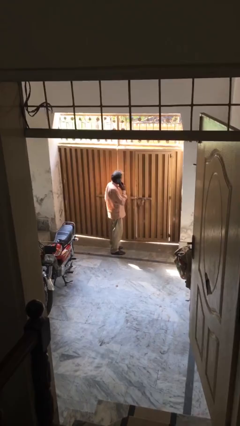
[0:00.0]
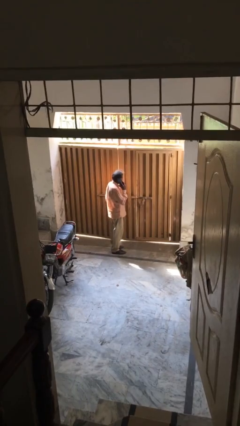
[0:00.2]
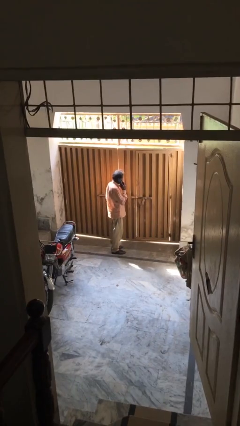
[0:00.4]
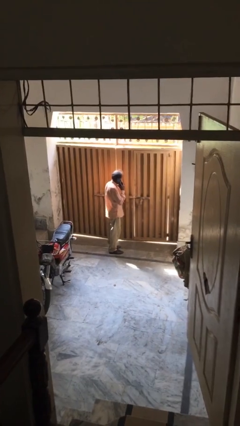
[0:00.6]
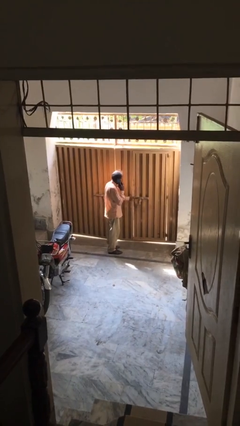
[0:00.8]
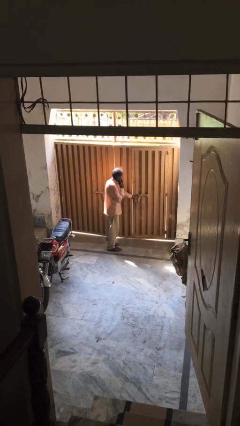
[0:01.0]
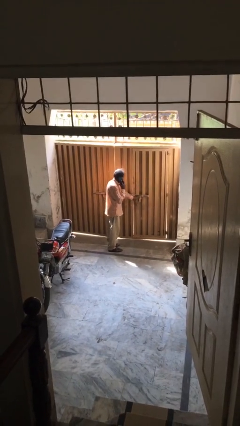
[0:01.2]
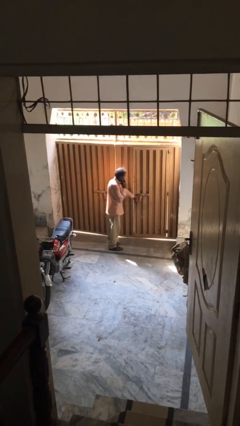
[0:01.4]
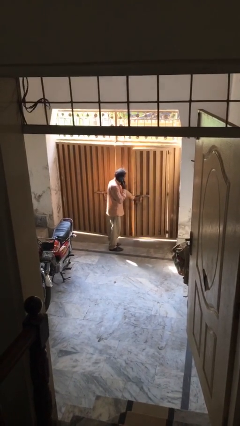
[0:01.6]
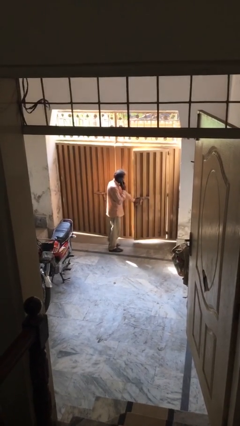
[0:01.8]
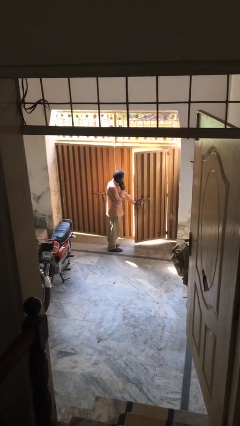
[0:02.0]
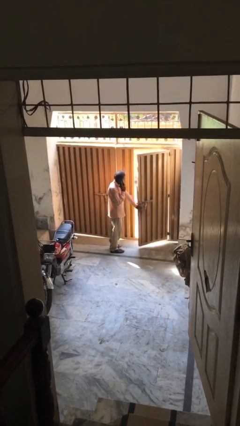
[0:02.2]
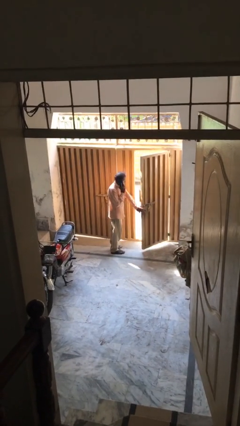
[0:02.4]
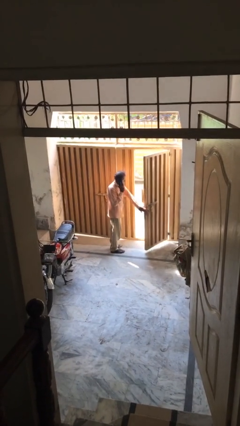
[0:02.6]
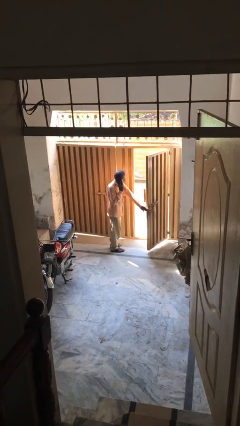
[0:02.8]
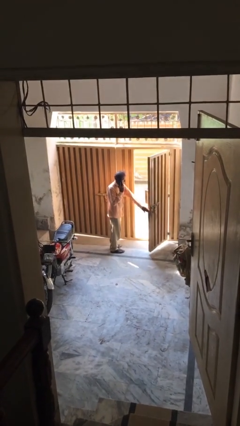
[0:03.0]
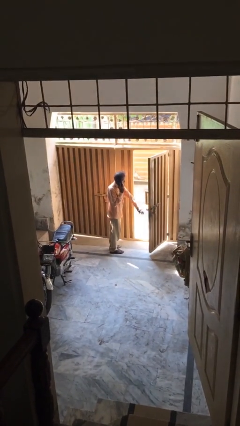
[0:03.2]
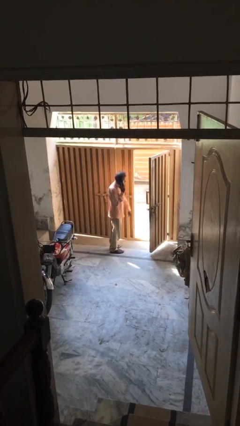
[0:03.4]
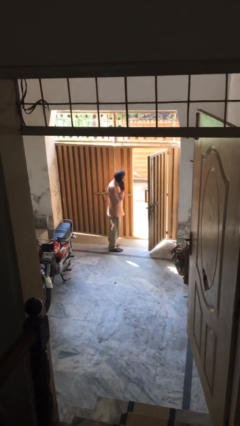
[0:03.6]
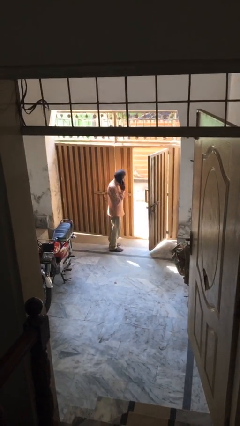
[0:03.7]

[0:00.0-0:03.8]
person opens facility door

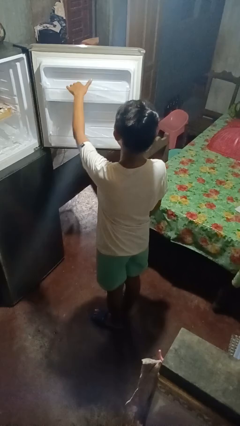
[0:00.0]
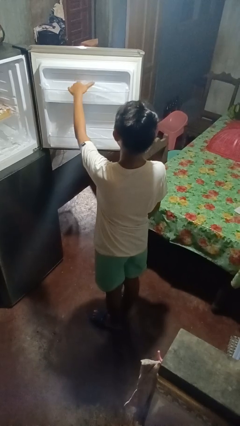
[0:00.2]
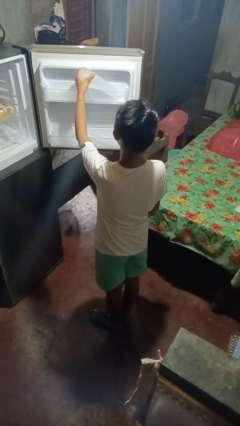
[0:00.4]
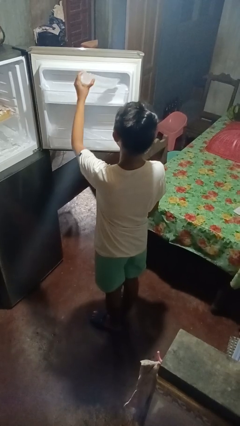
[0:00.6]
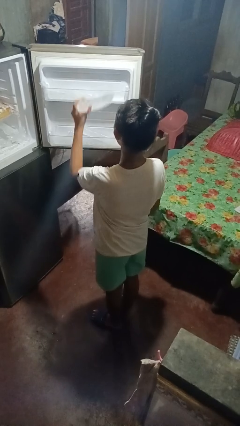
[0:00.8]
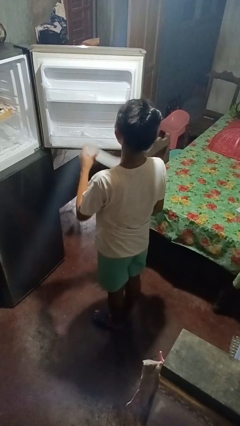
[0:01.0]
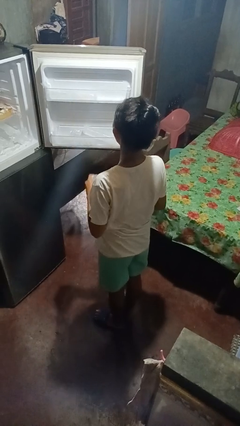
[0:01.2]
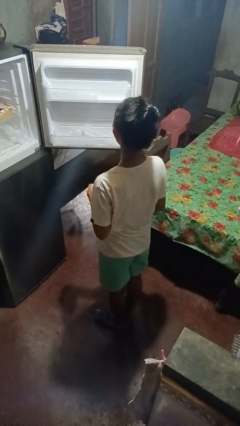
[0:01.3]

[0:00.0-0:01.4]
person takes object from refrigerator

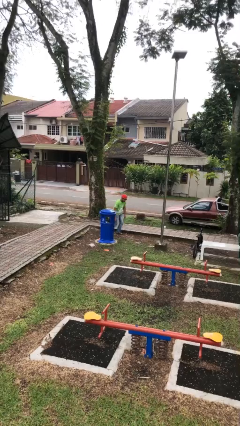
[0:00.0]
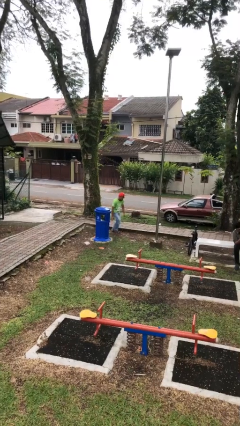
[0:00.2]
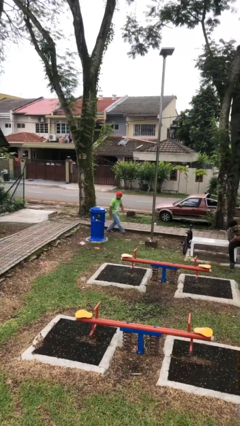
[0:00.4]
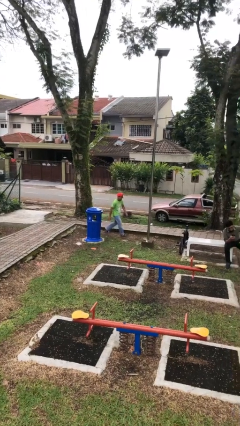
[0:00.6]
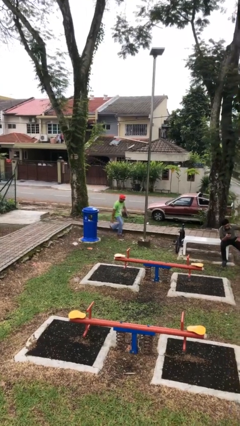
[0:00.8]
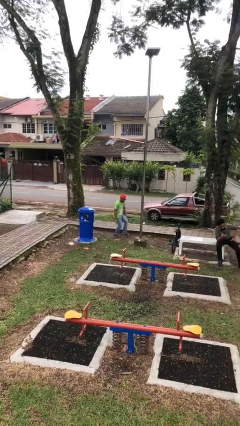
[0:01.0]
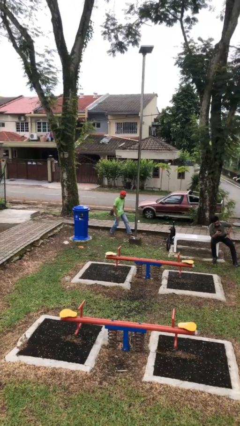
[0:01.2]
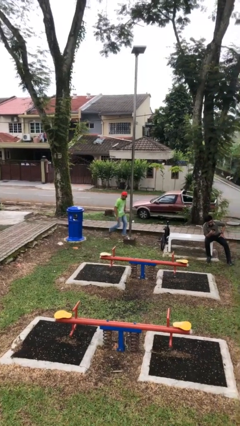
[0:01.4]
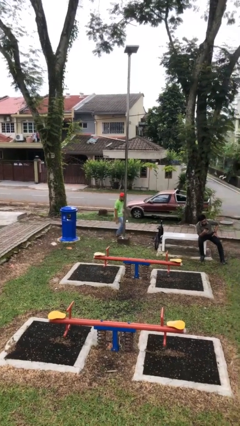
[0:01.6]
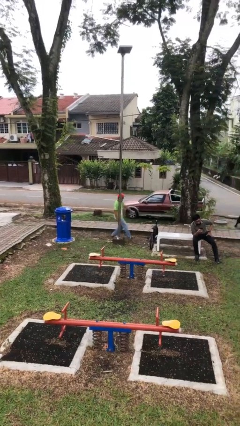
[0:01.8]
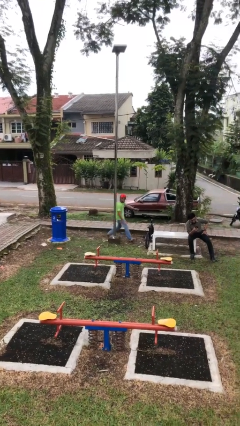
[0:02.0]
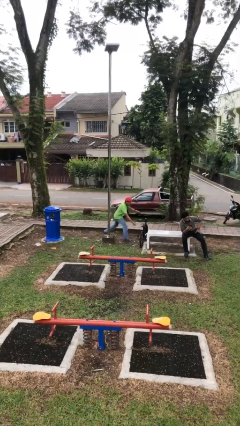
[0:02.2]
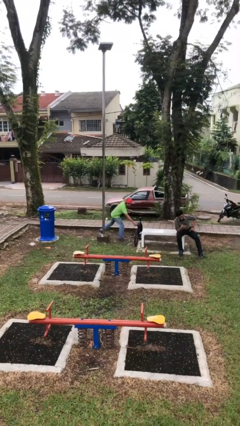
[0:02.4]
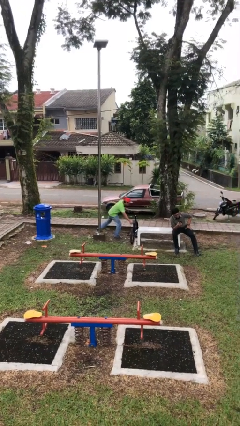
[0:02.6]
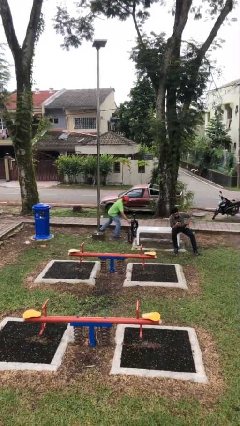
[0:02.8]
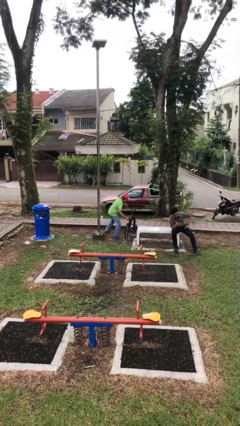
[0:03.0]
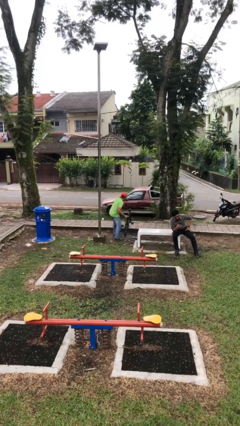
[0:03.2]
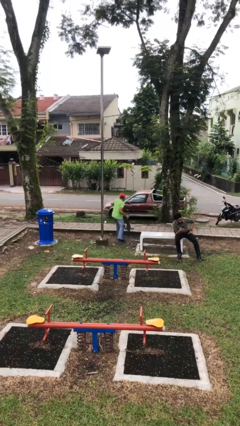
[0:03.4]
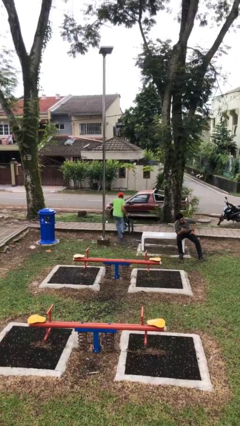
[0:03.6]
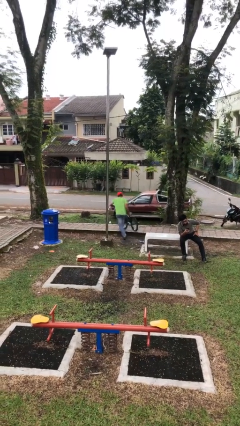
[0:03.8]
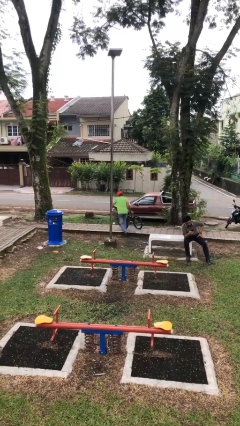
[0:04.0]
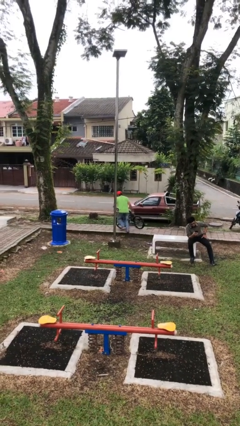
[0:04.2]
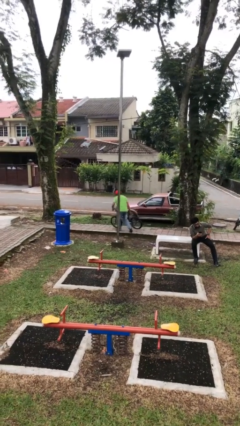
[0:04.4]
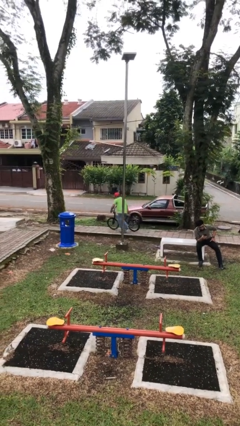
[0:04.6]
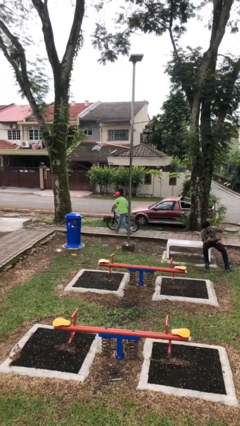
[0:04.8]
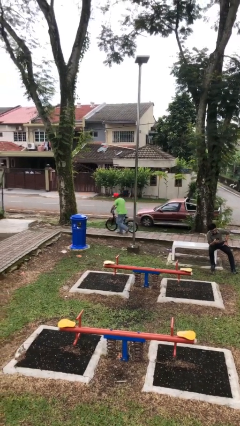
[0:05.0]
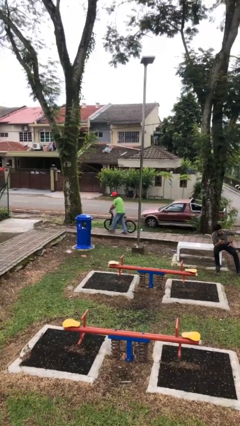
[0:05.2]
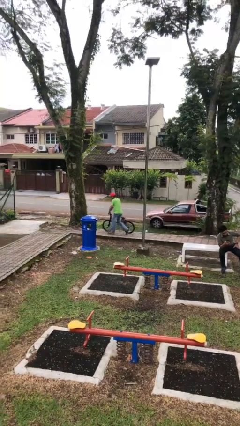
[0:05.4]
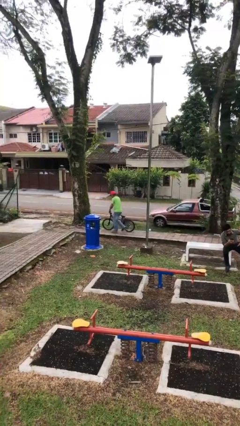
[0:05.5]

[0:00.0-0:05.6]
person steals object from person

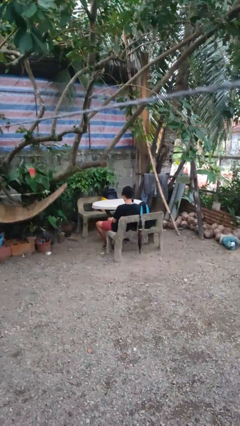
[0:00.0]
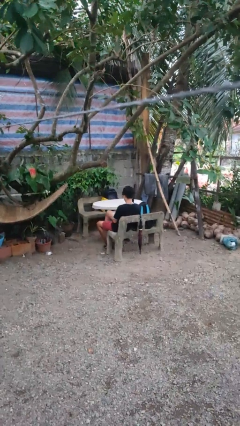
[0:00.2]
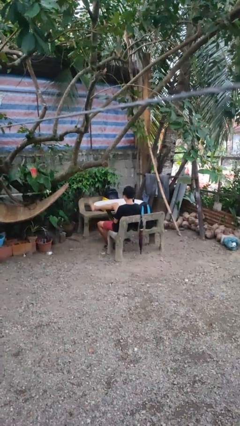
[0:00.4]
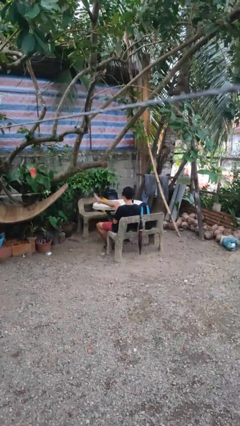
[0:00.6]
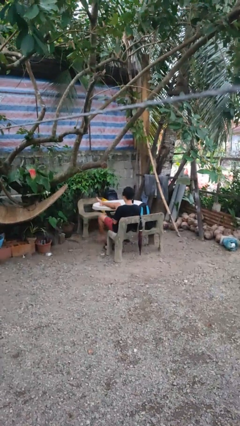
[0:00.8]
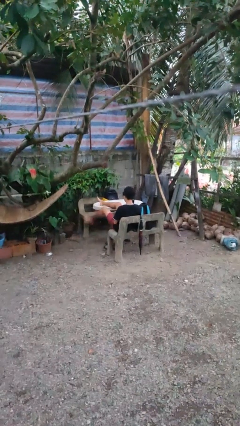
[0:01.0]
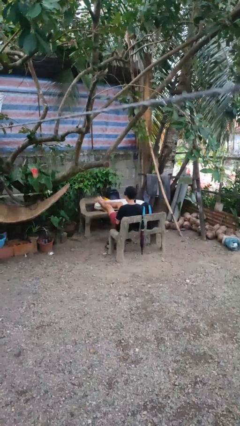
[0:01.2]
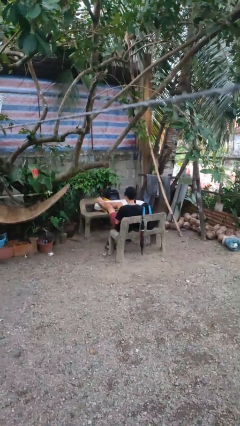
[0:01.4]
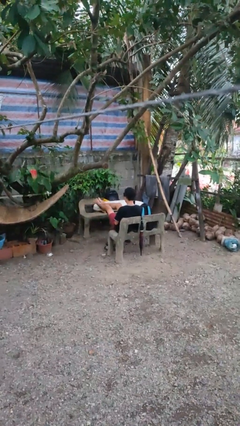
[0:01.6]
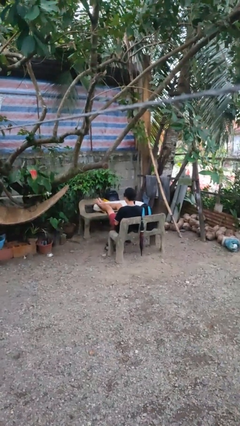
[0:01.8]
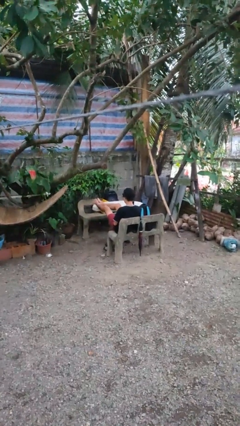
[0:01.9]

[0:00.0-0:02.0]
person puts feet up

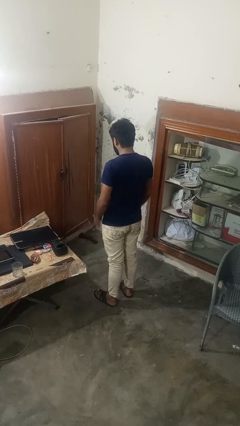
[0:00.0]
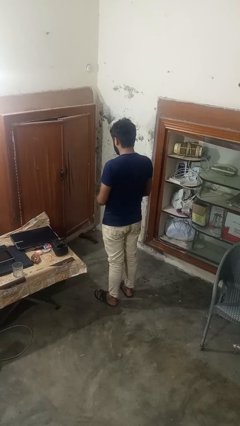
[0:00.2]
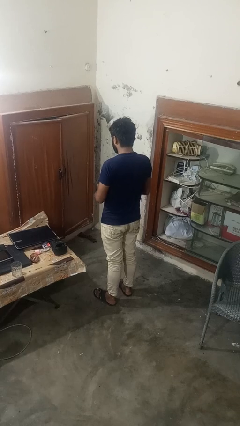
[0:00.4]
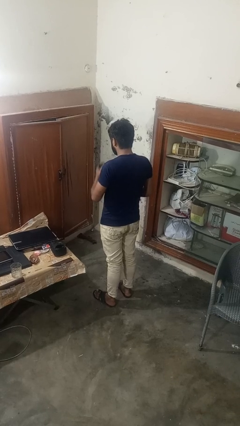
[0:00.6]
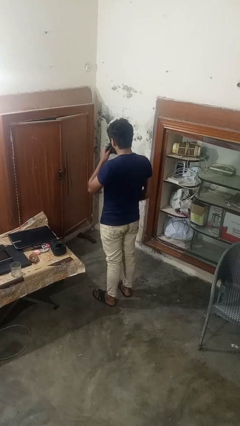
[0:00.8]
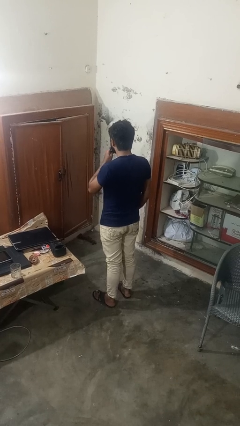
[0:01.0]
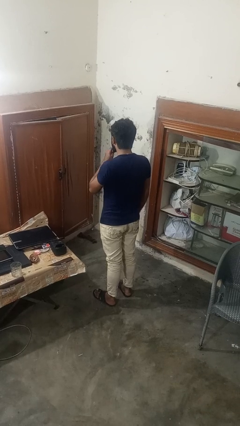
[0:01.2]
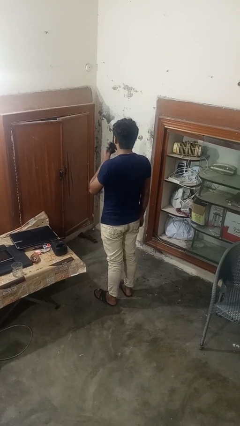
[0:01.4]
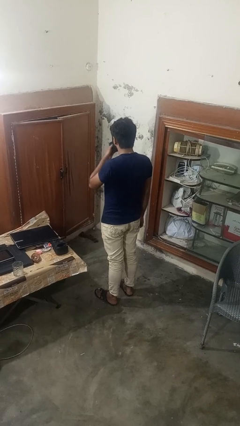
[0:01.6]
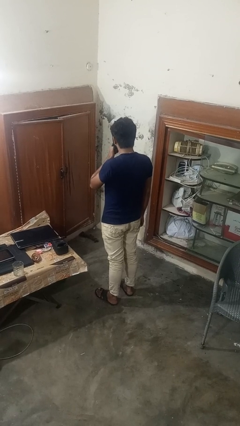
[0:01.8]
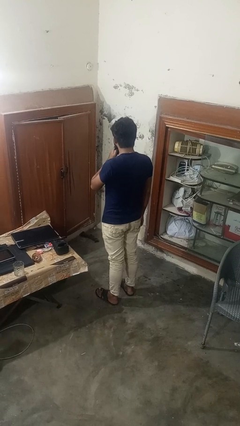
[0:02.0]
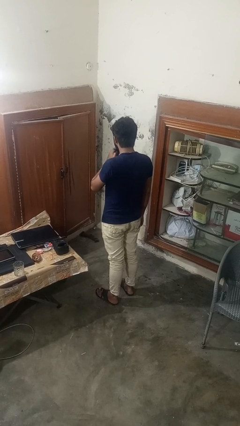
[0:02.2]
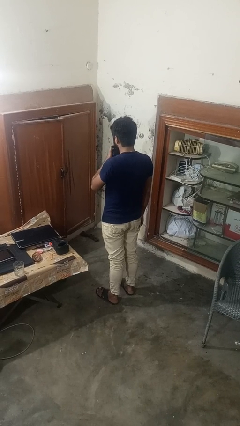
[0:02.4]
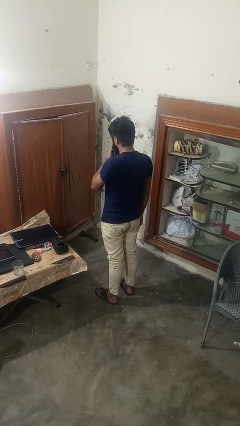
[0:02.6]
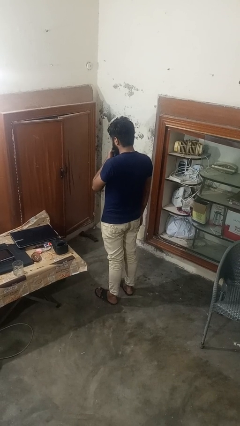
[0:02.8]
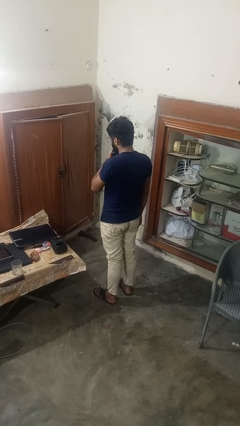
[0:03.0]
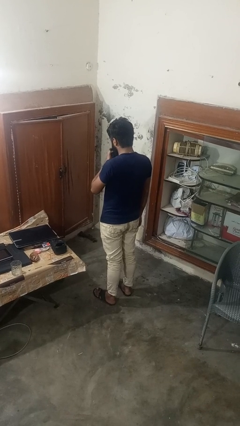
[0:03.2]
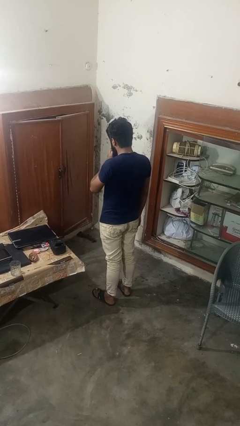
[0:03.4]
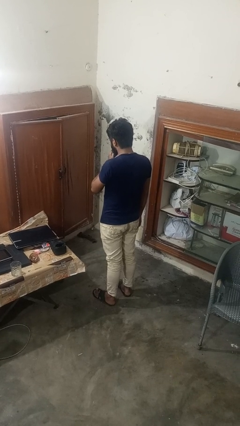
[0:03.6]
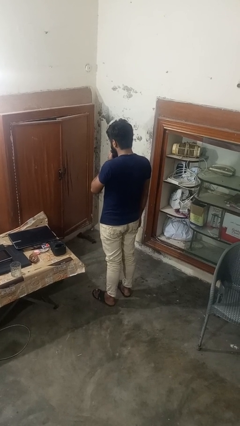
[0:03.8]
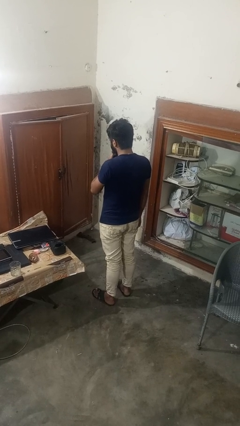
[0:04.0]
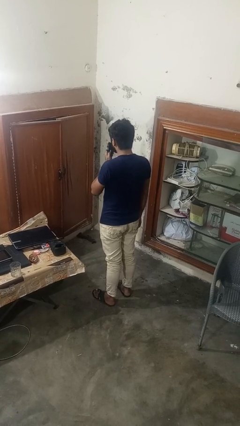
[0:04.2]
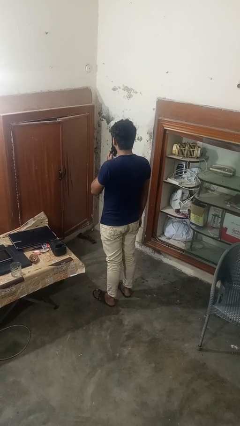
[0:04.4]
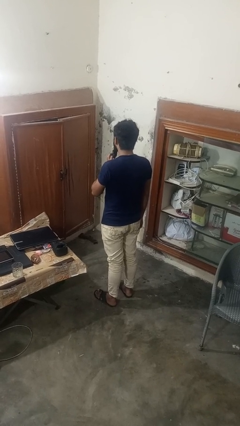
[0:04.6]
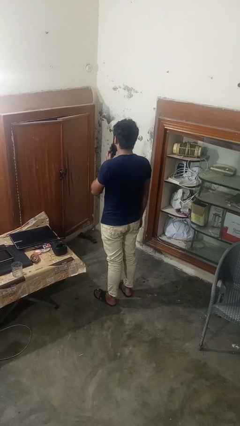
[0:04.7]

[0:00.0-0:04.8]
person wipes mouth with napkin
